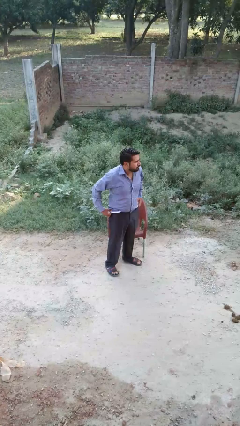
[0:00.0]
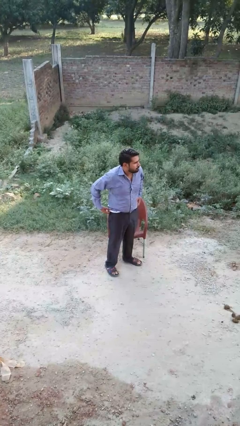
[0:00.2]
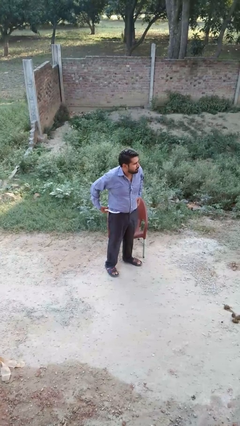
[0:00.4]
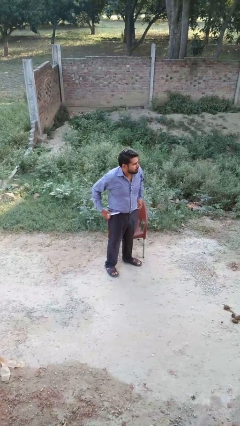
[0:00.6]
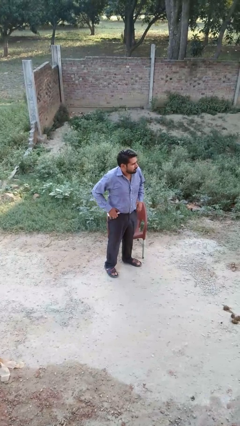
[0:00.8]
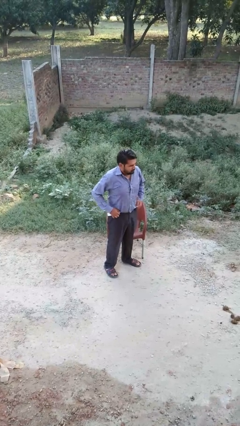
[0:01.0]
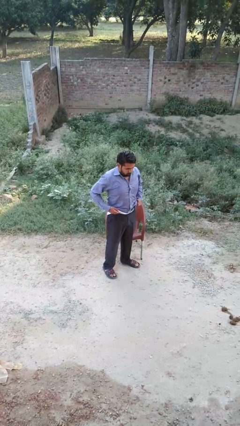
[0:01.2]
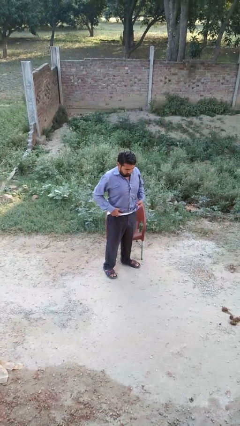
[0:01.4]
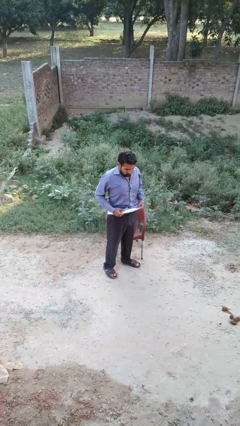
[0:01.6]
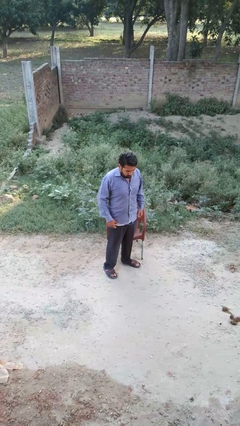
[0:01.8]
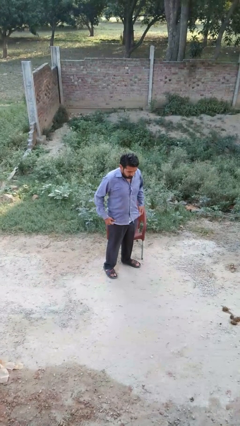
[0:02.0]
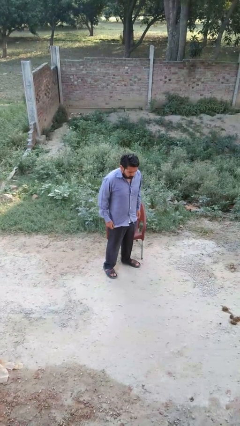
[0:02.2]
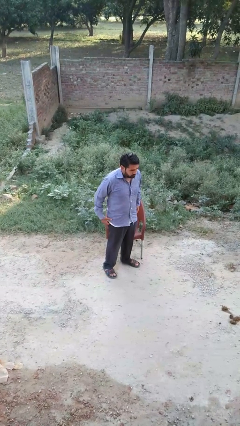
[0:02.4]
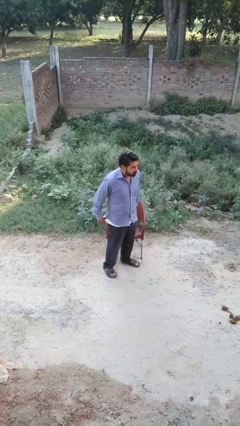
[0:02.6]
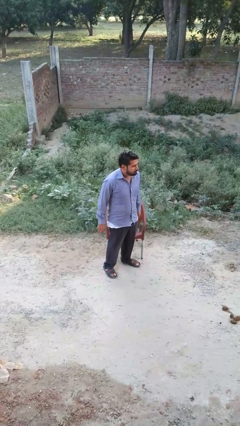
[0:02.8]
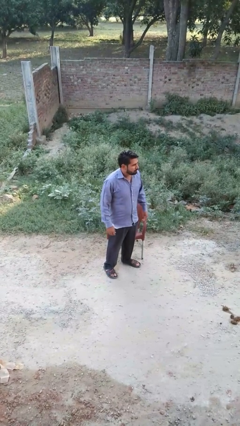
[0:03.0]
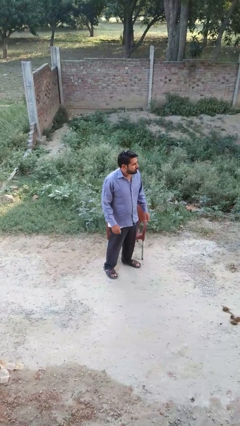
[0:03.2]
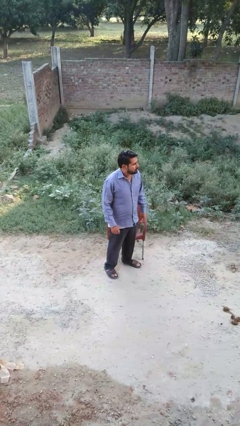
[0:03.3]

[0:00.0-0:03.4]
person untucks shirt

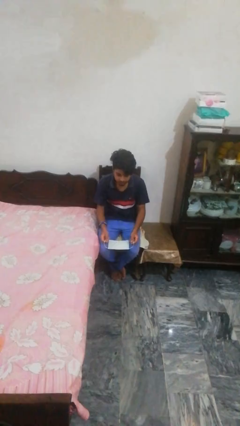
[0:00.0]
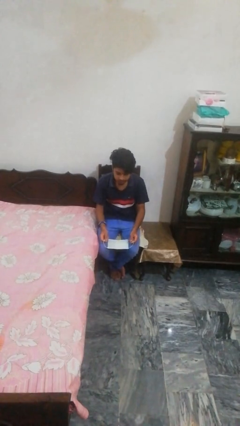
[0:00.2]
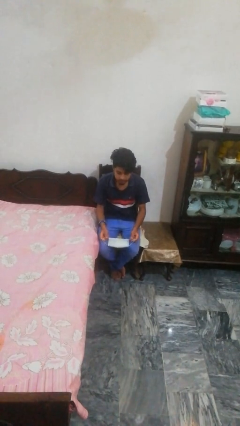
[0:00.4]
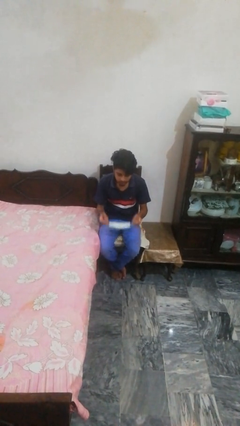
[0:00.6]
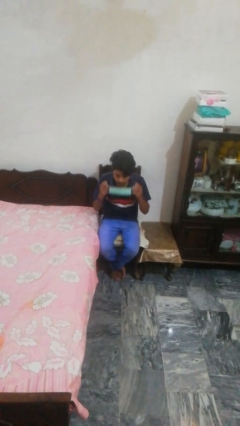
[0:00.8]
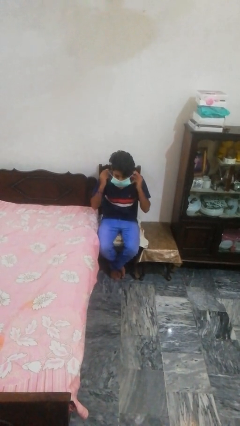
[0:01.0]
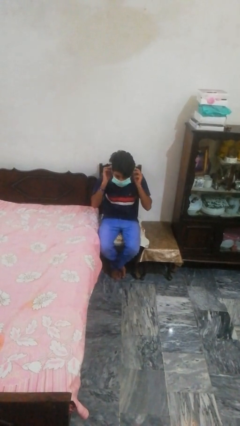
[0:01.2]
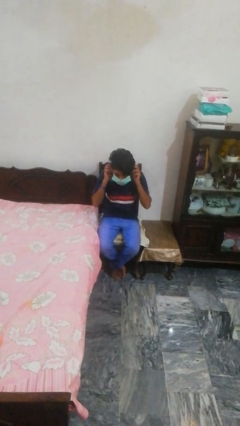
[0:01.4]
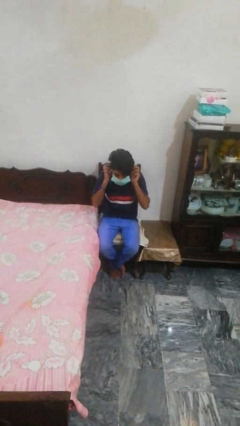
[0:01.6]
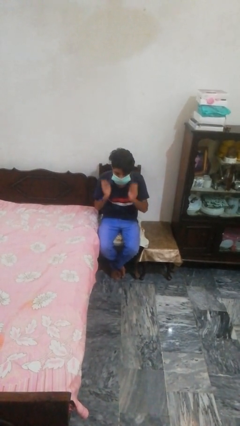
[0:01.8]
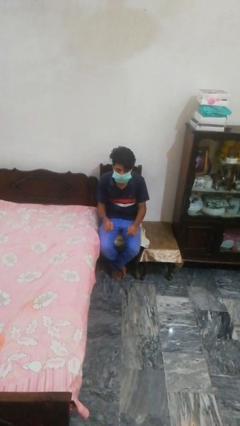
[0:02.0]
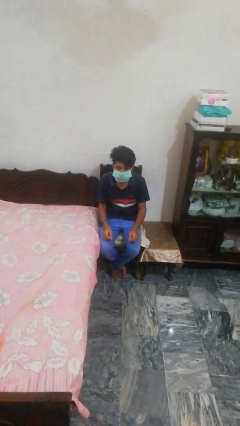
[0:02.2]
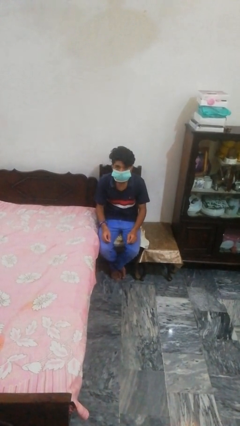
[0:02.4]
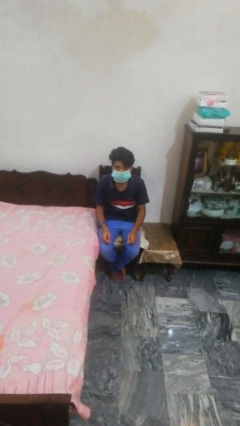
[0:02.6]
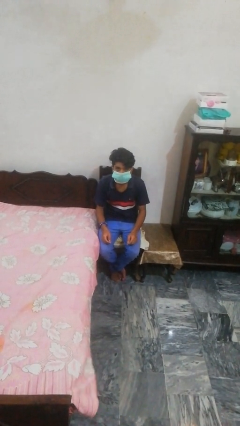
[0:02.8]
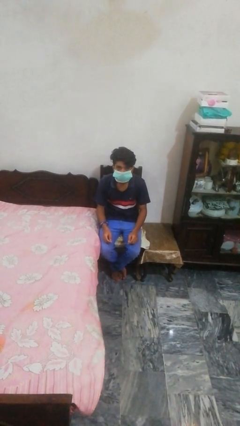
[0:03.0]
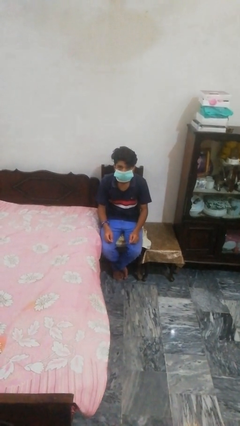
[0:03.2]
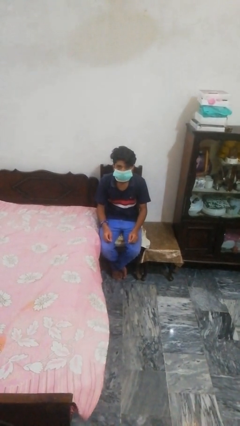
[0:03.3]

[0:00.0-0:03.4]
person puts on facemask

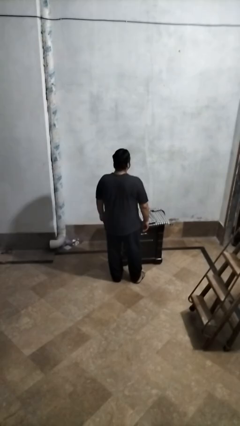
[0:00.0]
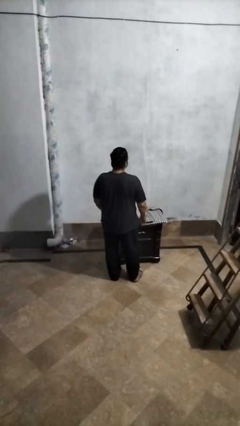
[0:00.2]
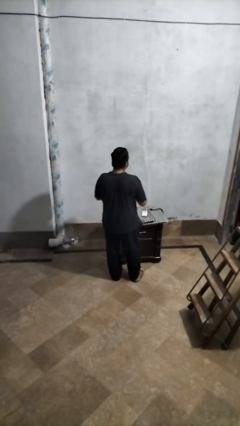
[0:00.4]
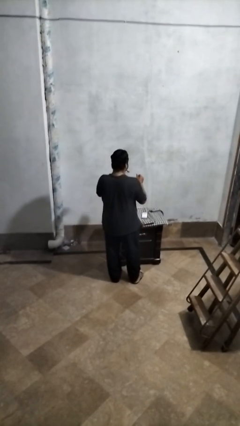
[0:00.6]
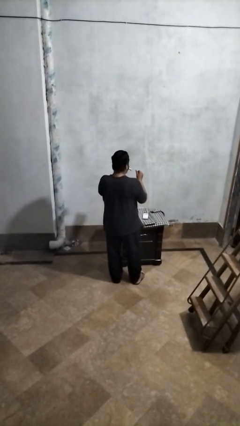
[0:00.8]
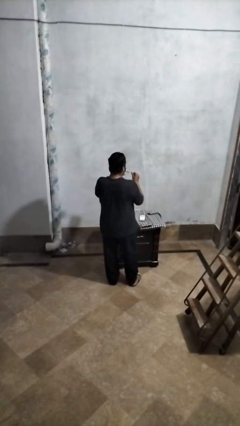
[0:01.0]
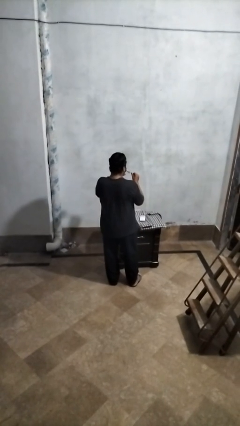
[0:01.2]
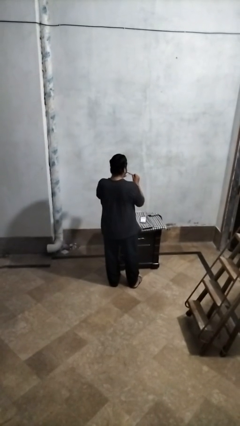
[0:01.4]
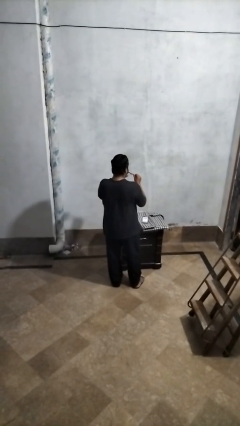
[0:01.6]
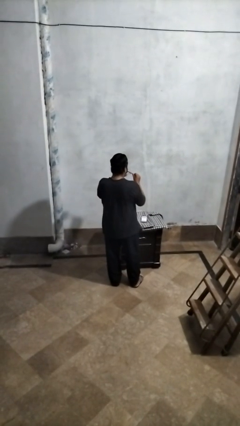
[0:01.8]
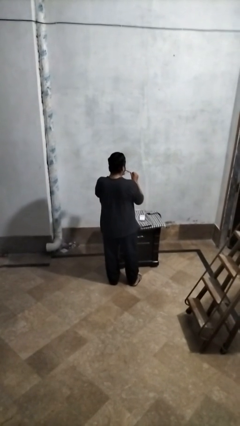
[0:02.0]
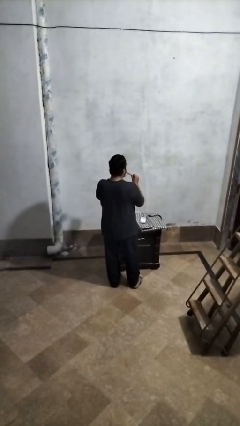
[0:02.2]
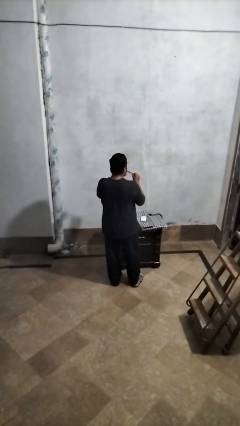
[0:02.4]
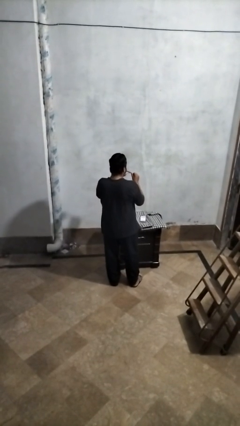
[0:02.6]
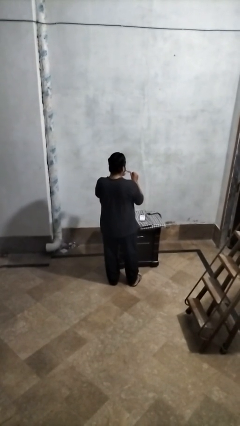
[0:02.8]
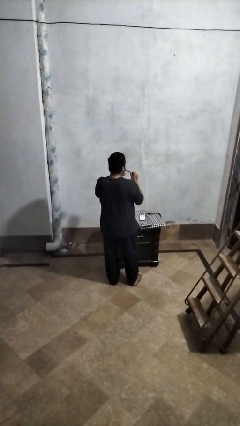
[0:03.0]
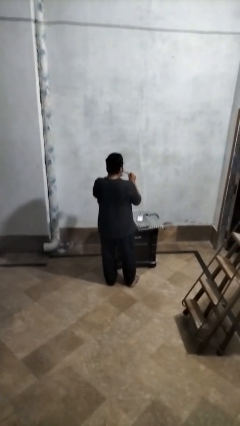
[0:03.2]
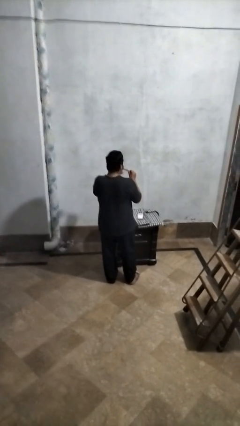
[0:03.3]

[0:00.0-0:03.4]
person clips fingernails

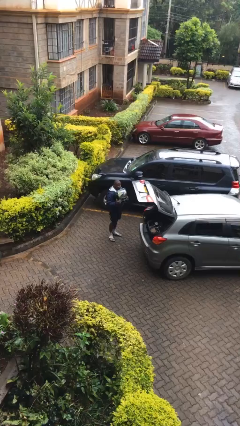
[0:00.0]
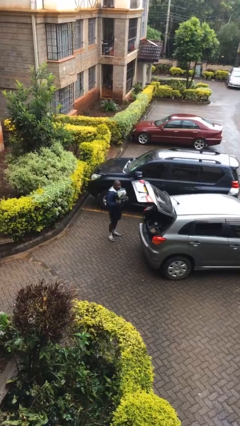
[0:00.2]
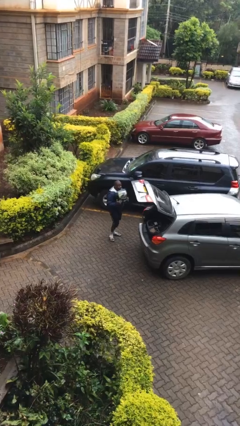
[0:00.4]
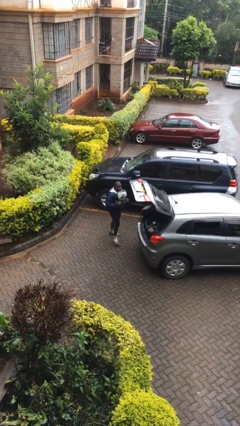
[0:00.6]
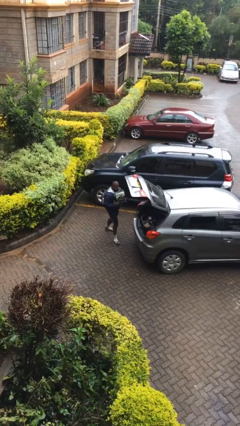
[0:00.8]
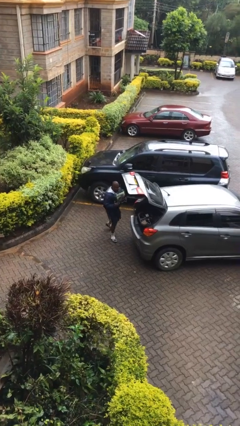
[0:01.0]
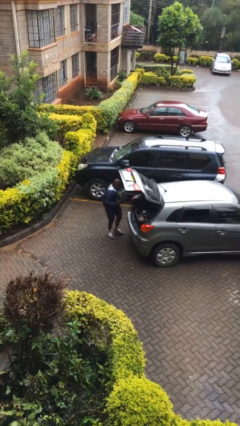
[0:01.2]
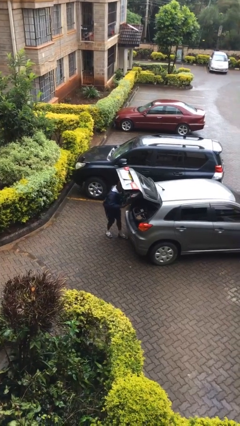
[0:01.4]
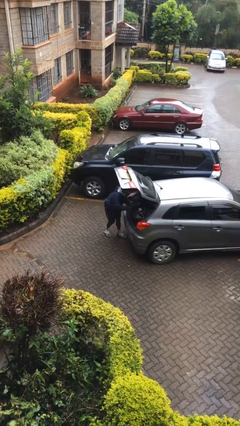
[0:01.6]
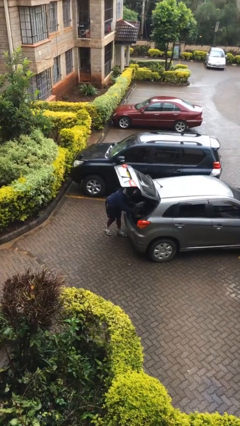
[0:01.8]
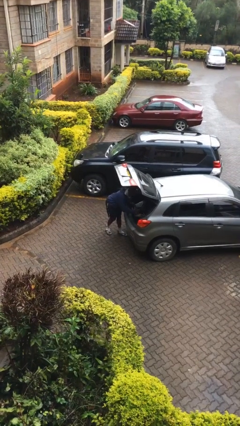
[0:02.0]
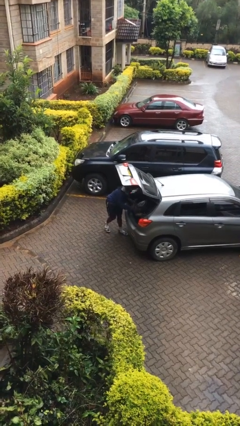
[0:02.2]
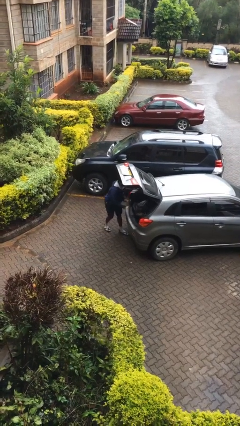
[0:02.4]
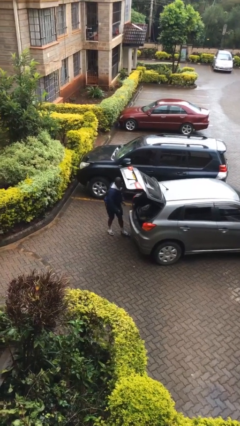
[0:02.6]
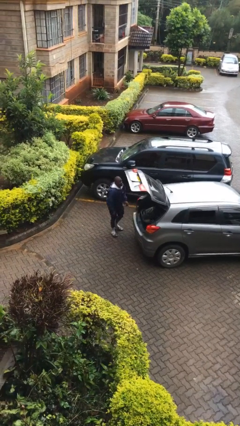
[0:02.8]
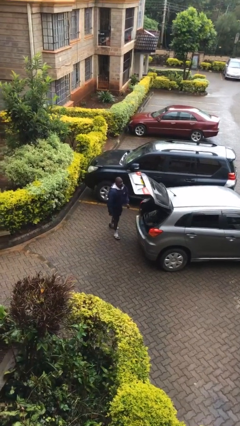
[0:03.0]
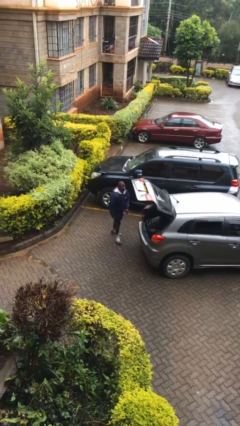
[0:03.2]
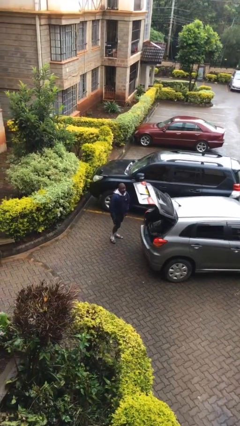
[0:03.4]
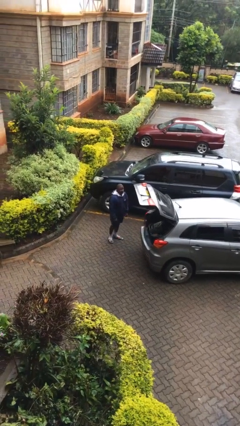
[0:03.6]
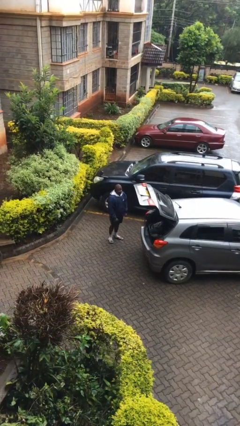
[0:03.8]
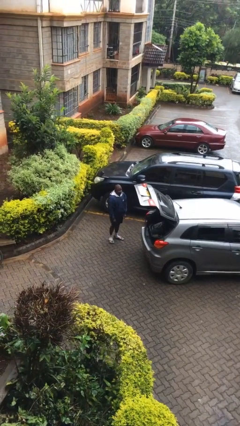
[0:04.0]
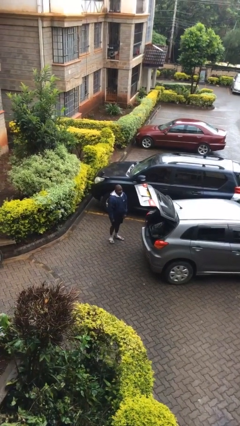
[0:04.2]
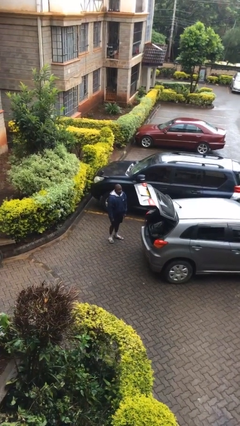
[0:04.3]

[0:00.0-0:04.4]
person loads car

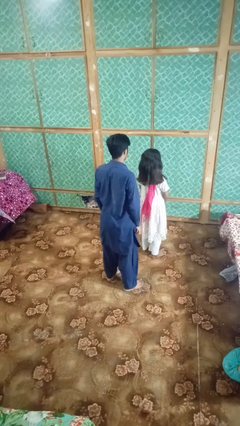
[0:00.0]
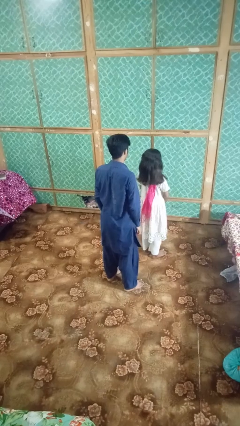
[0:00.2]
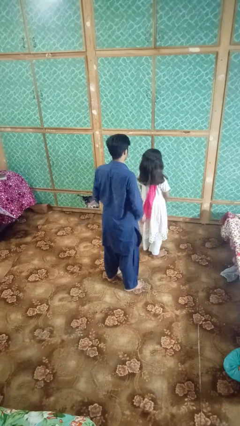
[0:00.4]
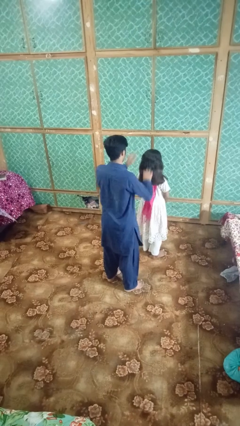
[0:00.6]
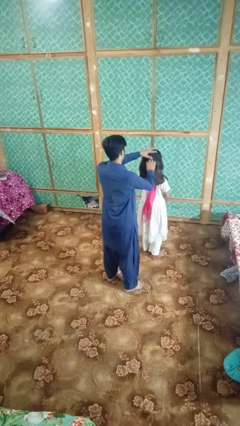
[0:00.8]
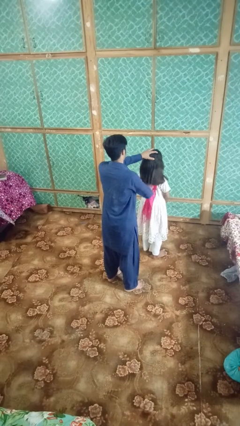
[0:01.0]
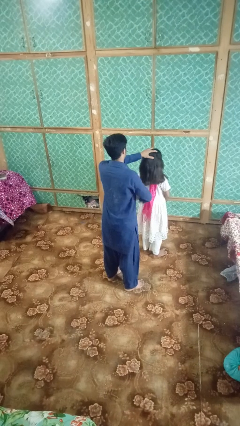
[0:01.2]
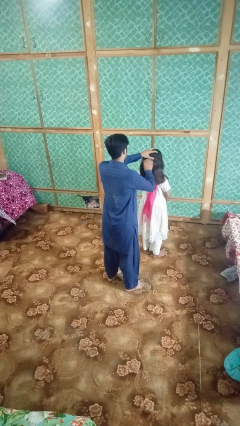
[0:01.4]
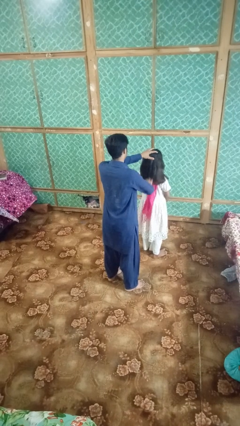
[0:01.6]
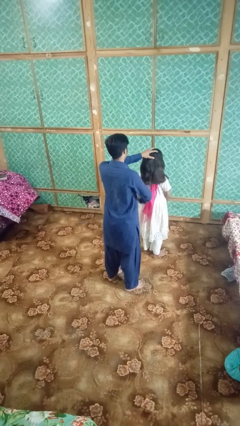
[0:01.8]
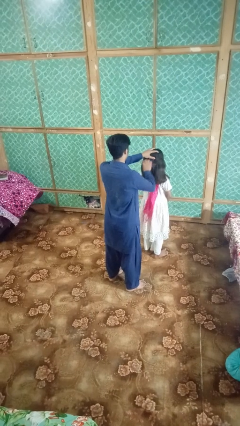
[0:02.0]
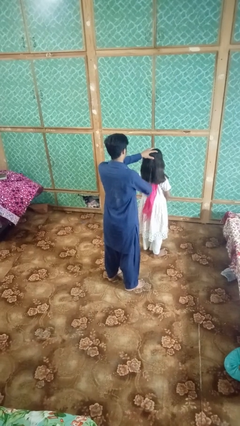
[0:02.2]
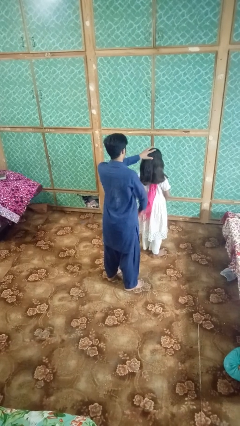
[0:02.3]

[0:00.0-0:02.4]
person brushes hair of person

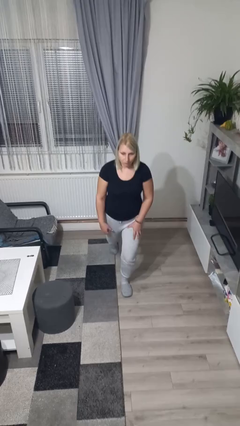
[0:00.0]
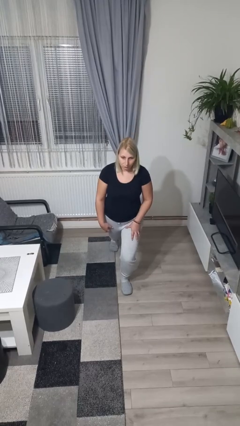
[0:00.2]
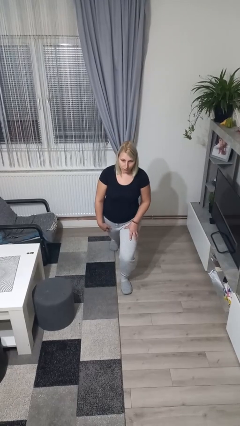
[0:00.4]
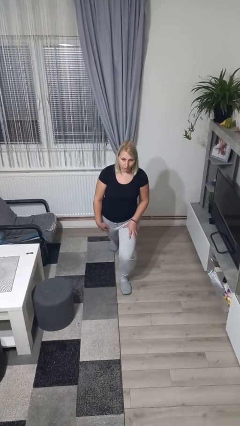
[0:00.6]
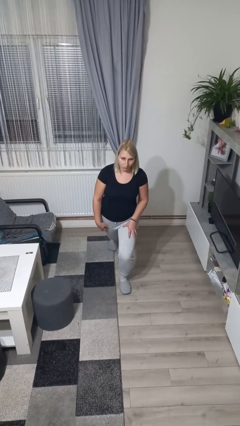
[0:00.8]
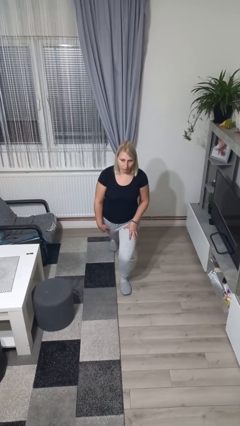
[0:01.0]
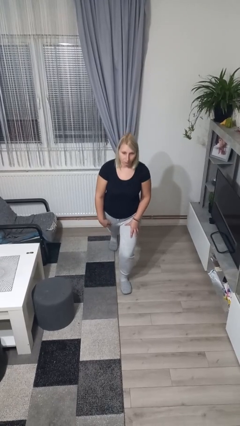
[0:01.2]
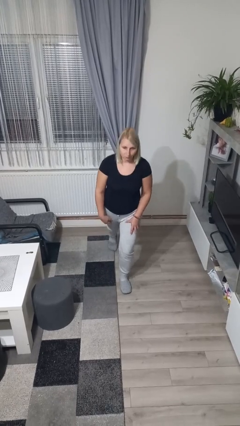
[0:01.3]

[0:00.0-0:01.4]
person exercises with lunges
